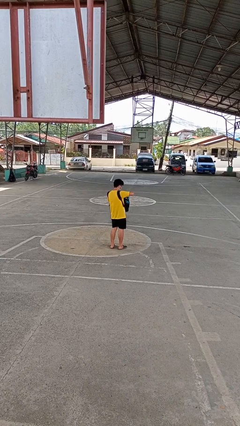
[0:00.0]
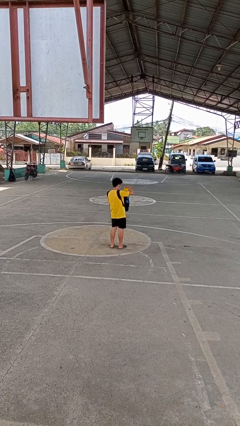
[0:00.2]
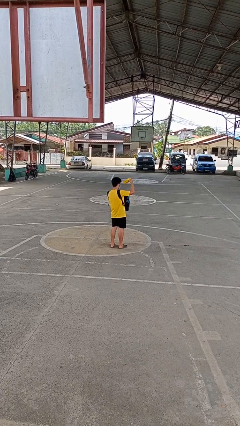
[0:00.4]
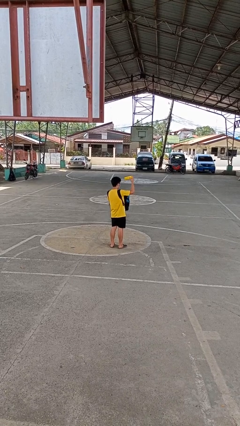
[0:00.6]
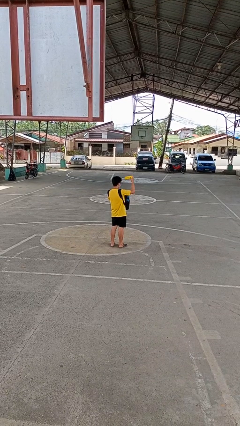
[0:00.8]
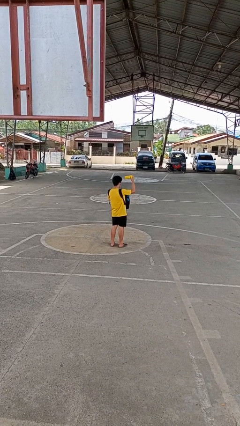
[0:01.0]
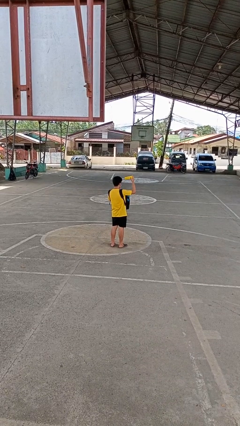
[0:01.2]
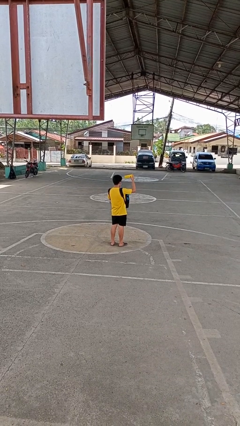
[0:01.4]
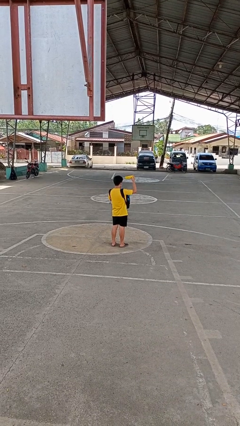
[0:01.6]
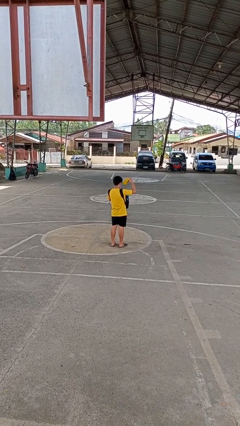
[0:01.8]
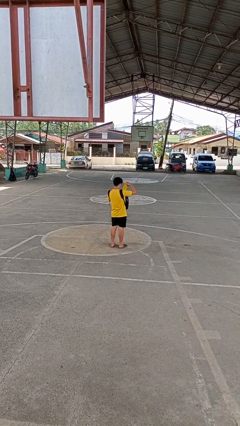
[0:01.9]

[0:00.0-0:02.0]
person takes object from backpack

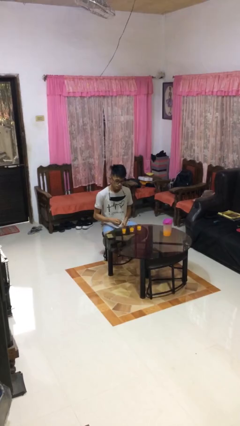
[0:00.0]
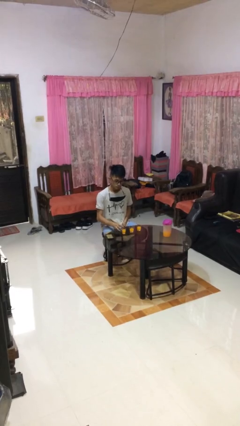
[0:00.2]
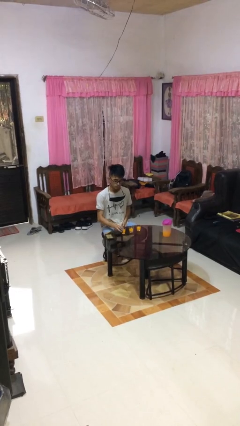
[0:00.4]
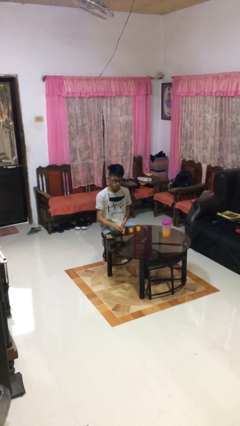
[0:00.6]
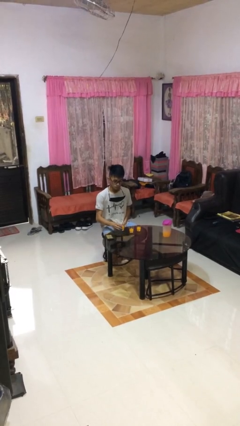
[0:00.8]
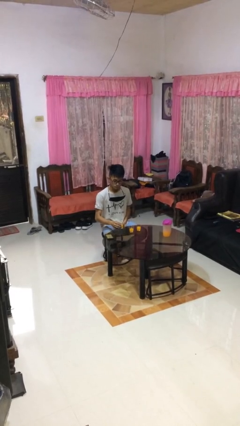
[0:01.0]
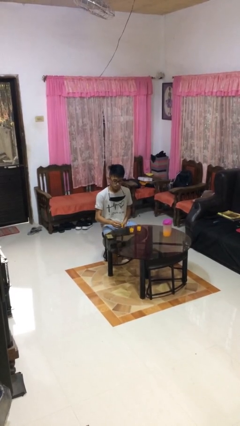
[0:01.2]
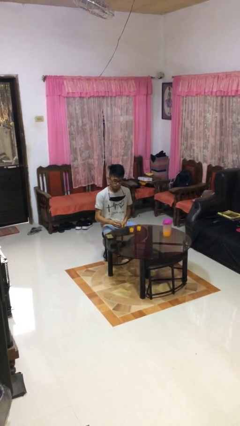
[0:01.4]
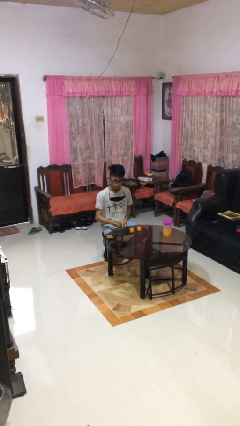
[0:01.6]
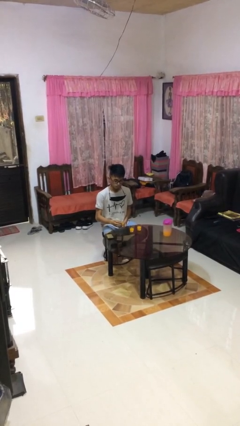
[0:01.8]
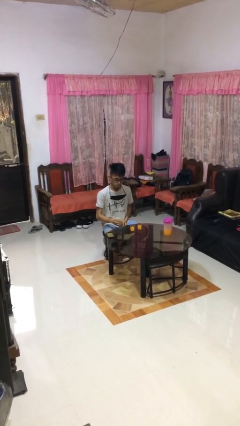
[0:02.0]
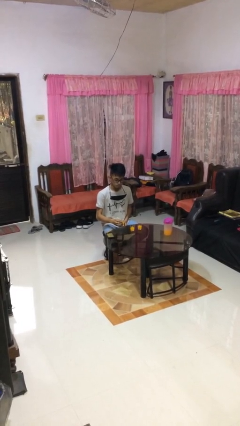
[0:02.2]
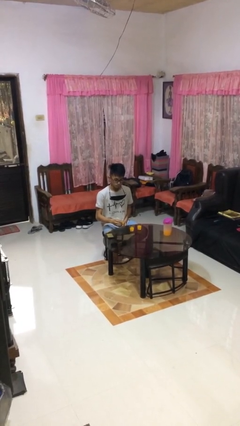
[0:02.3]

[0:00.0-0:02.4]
person picks up object from table

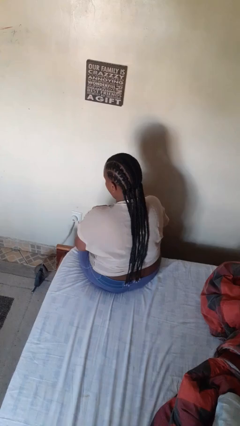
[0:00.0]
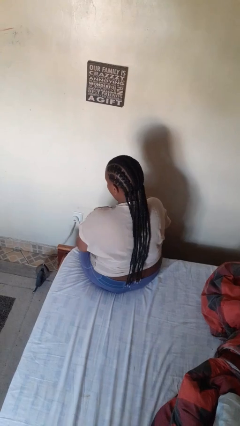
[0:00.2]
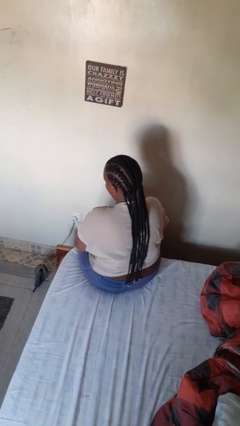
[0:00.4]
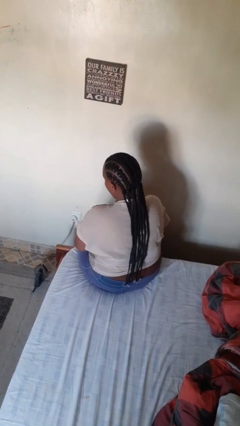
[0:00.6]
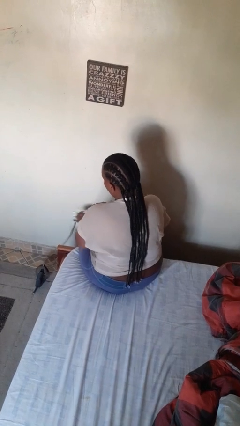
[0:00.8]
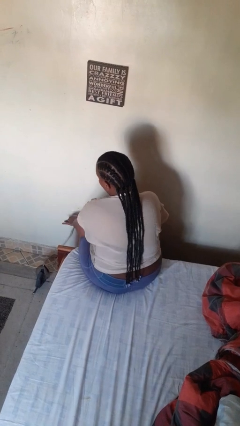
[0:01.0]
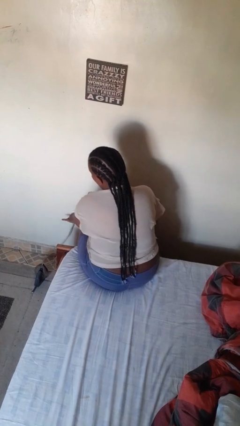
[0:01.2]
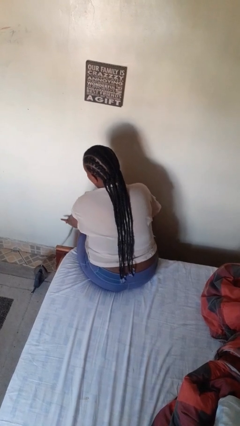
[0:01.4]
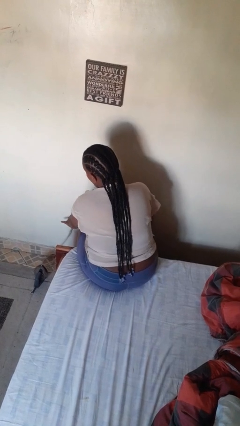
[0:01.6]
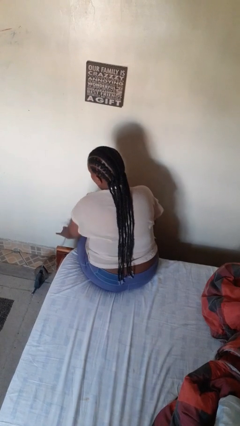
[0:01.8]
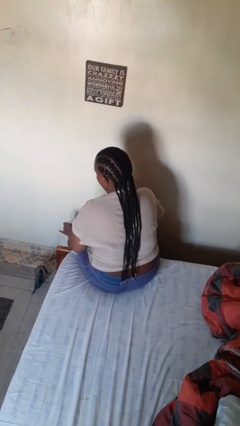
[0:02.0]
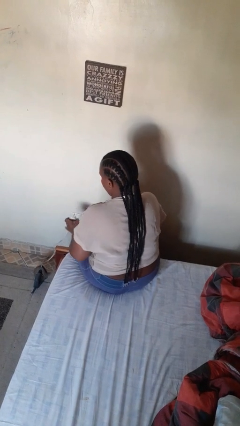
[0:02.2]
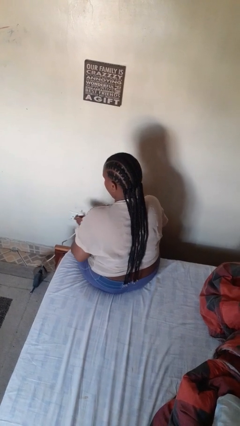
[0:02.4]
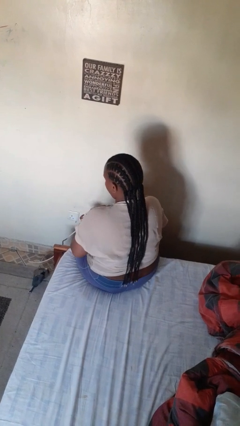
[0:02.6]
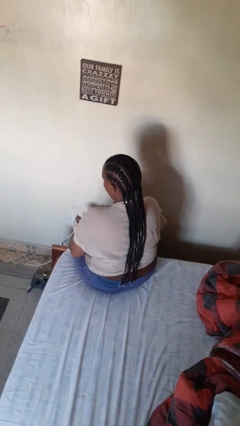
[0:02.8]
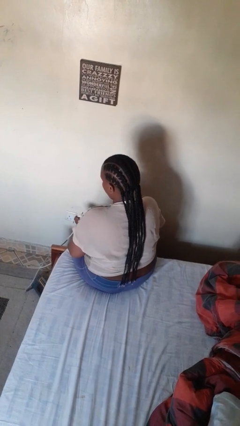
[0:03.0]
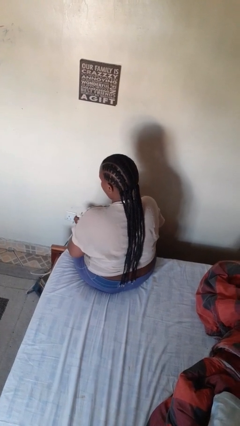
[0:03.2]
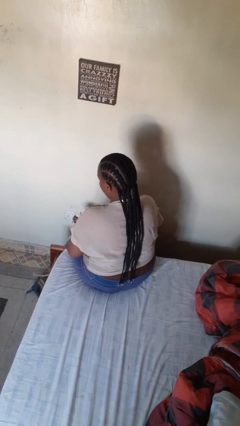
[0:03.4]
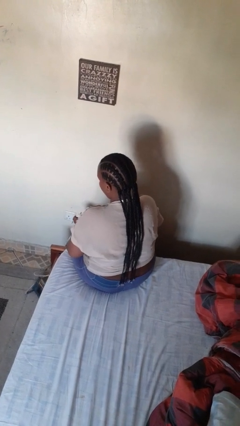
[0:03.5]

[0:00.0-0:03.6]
person unplugs from electrical socket

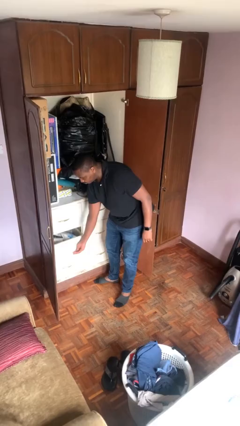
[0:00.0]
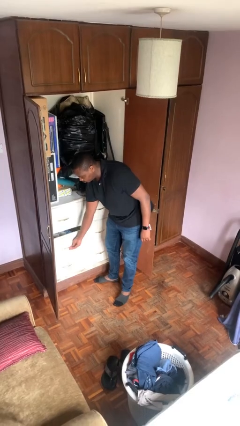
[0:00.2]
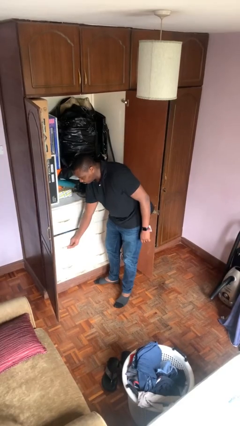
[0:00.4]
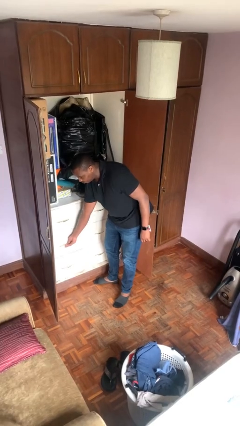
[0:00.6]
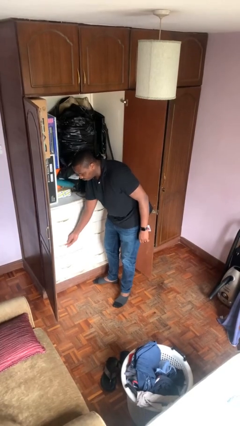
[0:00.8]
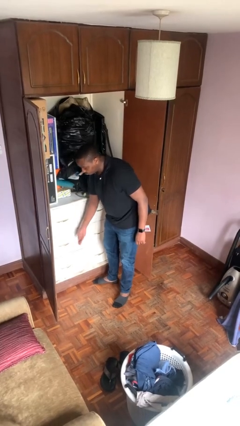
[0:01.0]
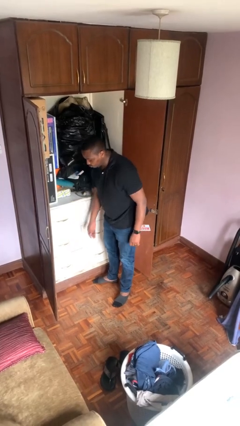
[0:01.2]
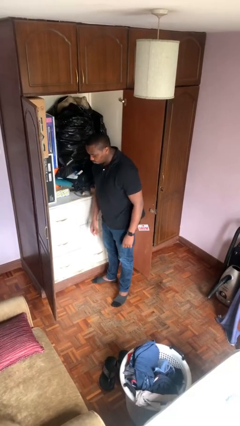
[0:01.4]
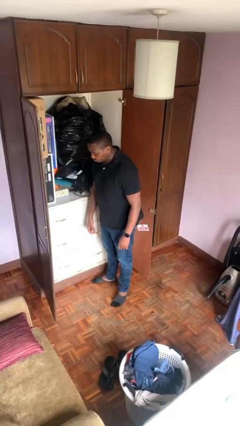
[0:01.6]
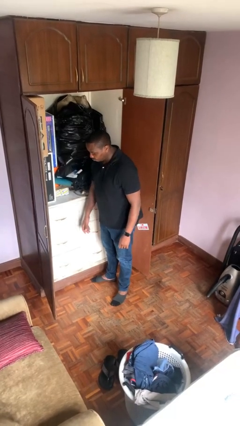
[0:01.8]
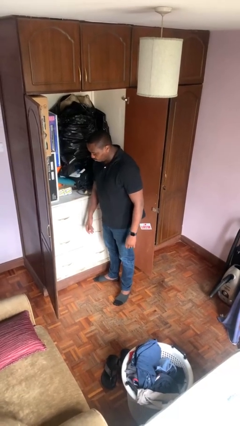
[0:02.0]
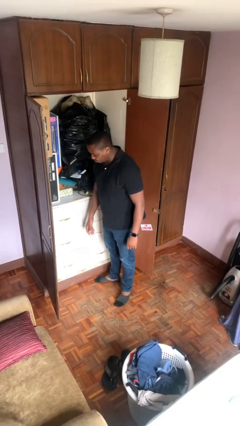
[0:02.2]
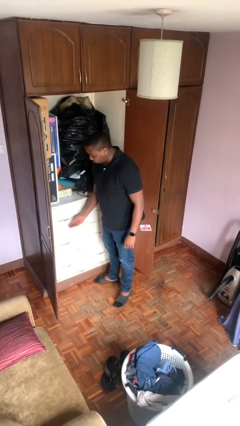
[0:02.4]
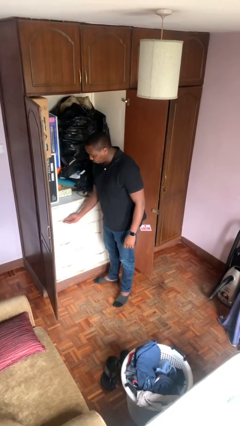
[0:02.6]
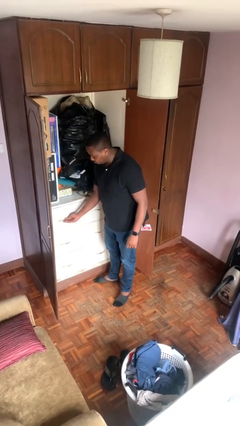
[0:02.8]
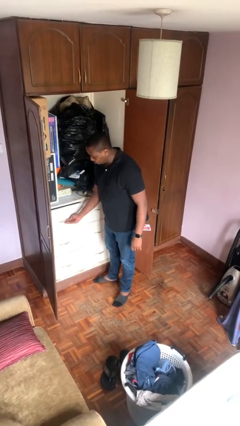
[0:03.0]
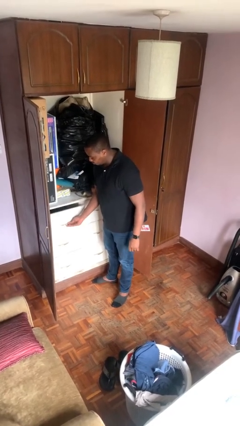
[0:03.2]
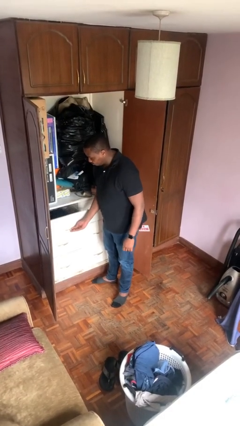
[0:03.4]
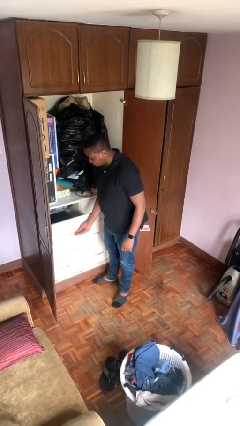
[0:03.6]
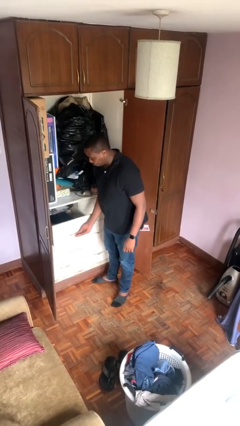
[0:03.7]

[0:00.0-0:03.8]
person closes dresser drawer

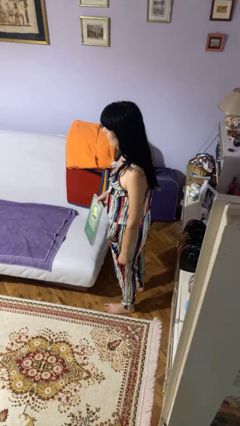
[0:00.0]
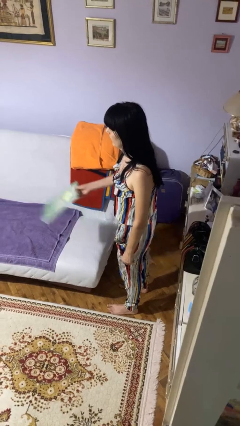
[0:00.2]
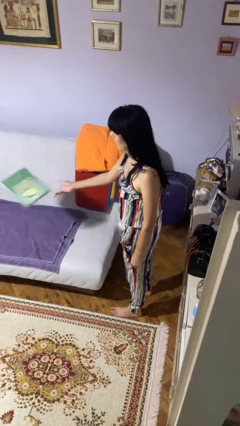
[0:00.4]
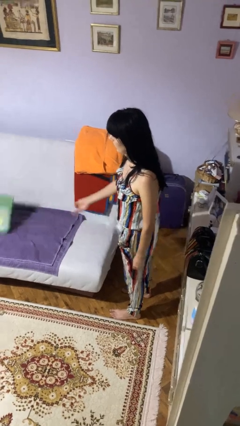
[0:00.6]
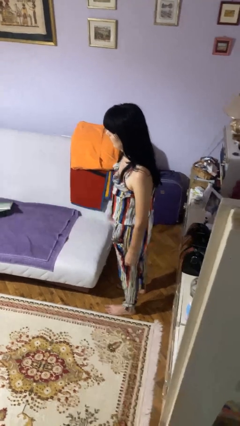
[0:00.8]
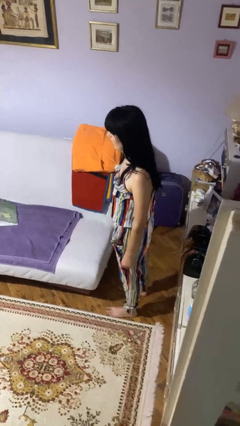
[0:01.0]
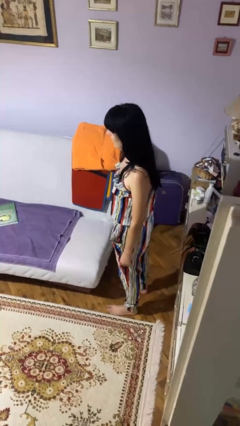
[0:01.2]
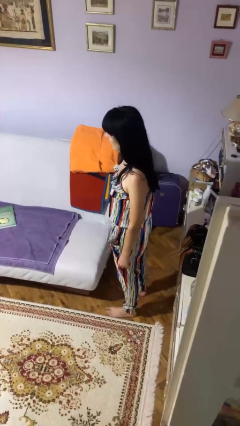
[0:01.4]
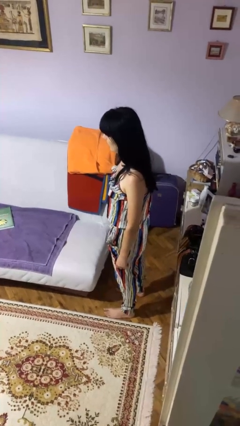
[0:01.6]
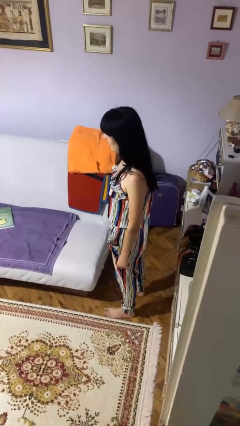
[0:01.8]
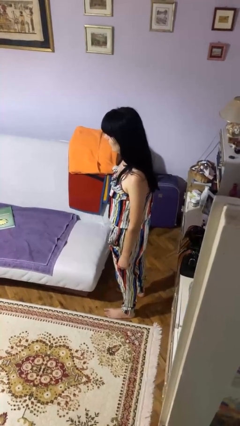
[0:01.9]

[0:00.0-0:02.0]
person throws object on bed

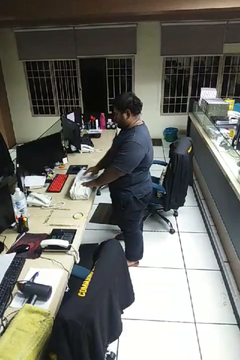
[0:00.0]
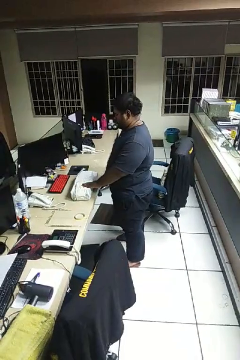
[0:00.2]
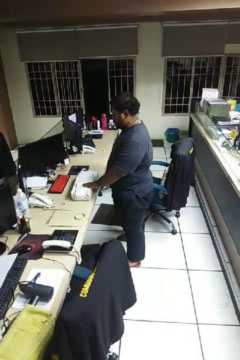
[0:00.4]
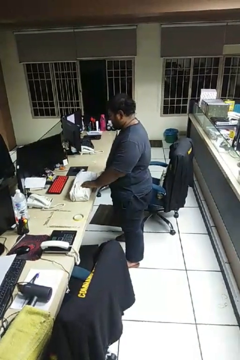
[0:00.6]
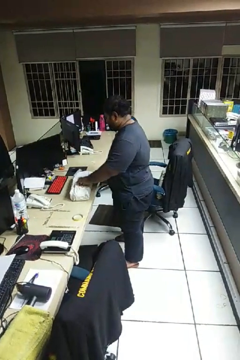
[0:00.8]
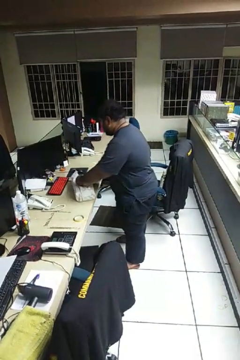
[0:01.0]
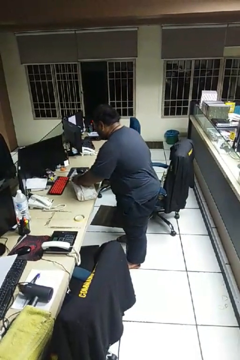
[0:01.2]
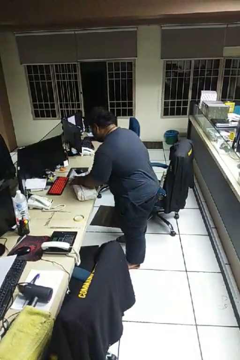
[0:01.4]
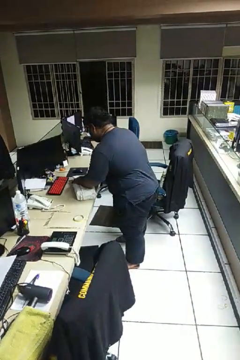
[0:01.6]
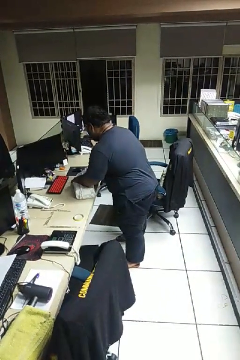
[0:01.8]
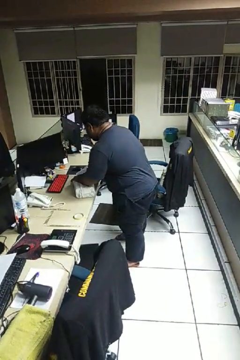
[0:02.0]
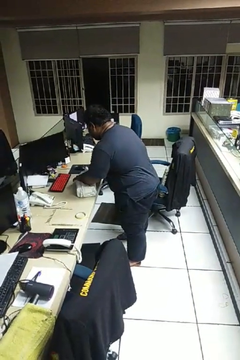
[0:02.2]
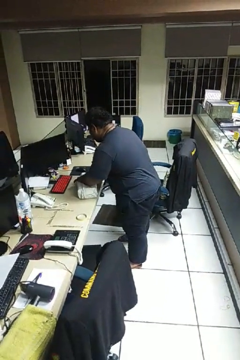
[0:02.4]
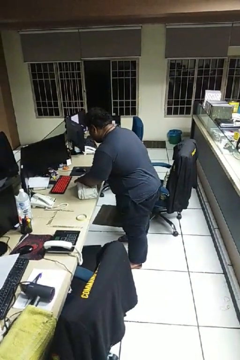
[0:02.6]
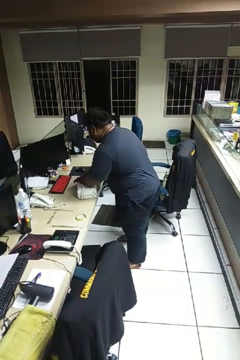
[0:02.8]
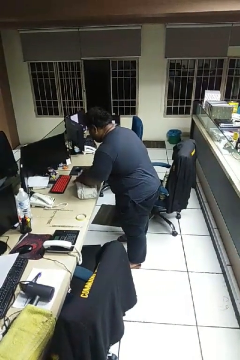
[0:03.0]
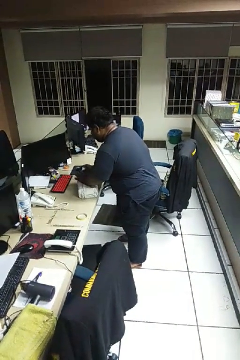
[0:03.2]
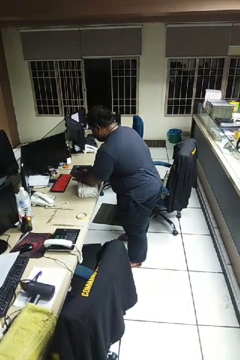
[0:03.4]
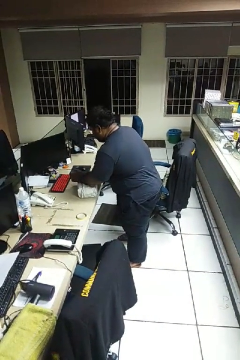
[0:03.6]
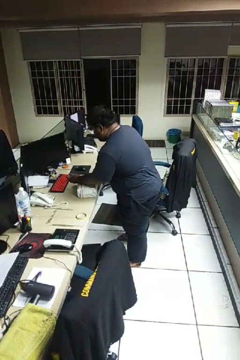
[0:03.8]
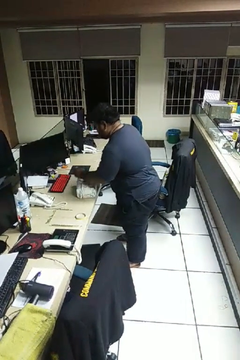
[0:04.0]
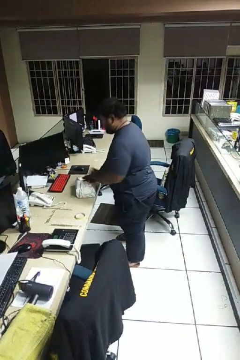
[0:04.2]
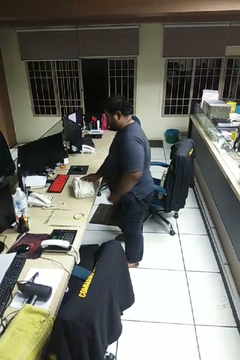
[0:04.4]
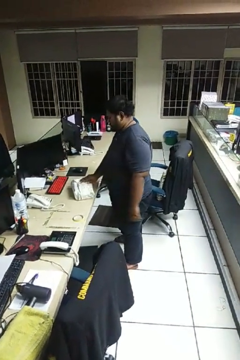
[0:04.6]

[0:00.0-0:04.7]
person wraps box

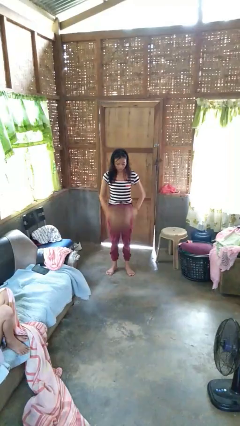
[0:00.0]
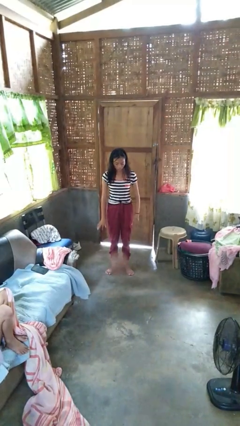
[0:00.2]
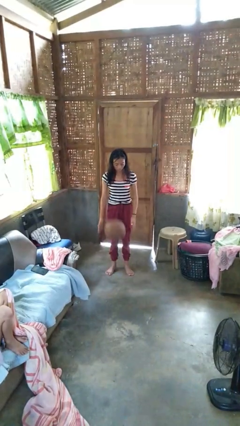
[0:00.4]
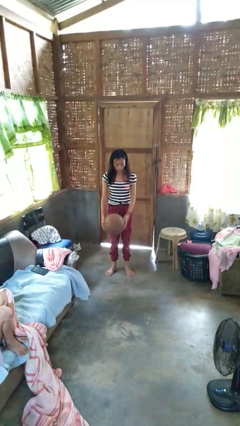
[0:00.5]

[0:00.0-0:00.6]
person bounces ball on floor
